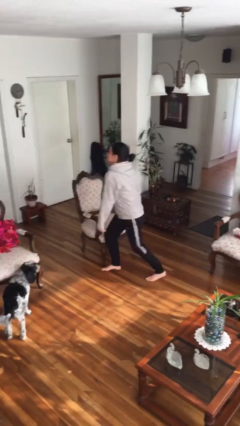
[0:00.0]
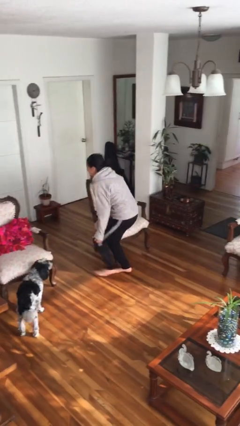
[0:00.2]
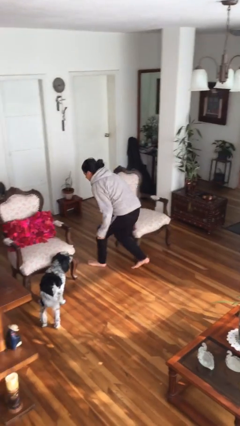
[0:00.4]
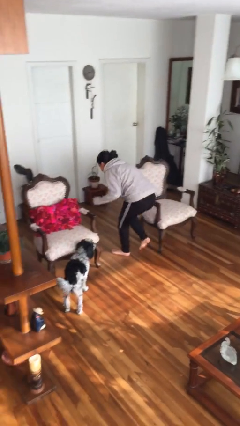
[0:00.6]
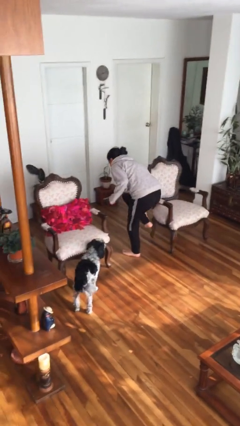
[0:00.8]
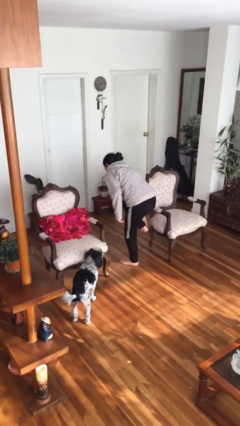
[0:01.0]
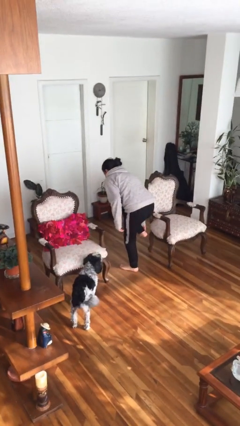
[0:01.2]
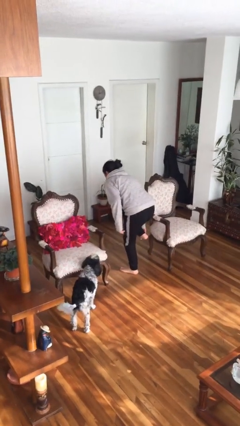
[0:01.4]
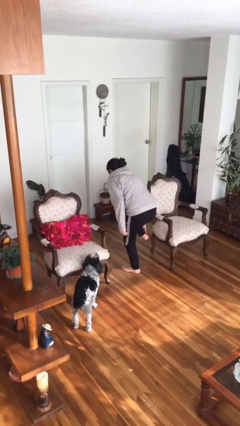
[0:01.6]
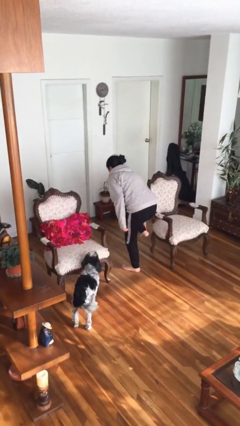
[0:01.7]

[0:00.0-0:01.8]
person stubs toe

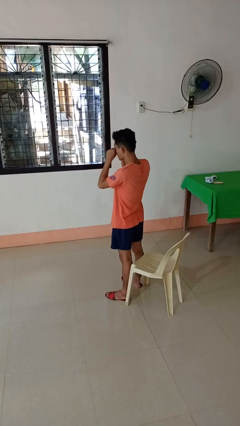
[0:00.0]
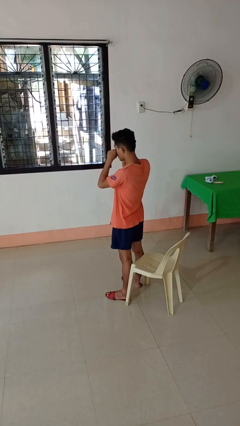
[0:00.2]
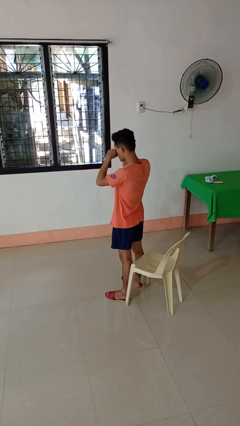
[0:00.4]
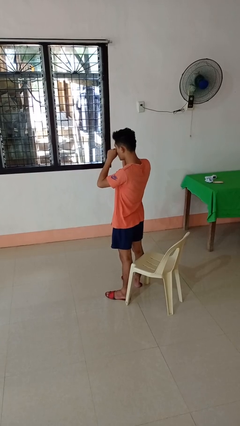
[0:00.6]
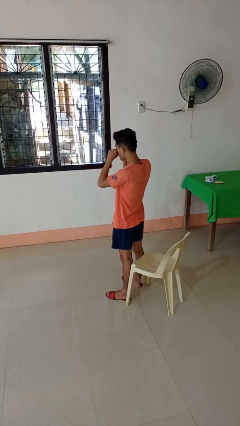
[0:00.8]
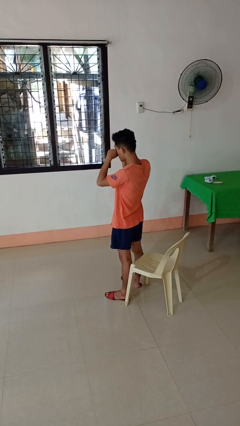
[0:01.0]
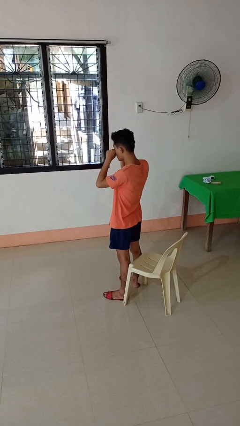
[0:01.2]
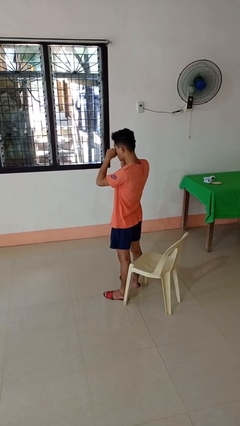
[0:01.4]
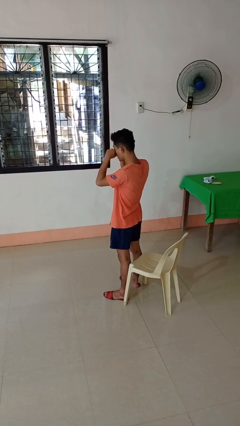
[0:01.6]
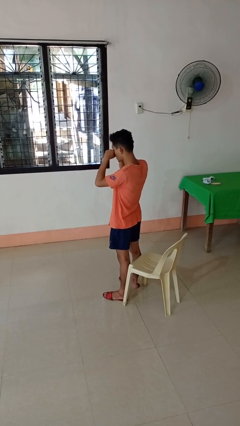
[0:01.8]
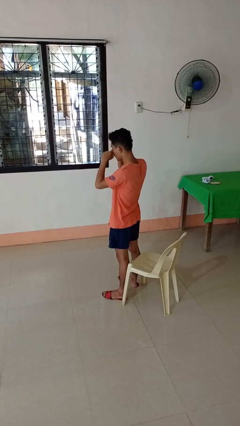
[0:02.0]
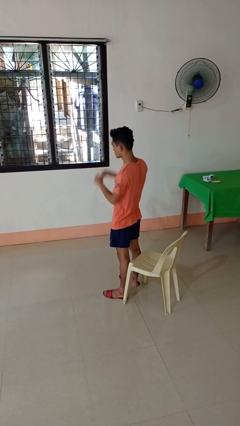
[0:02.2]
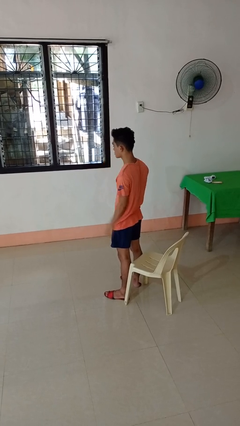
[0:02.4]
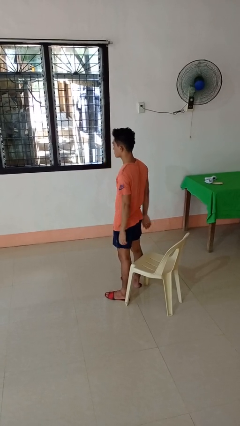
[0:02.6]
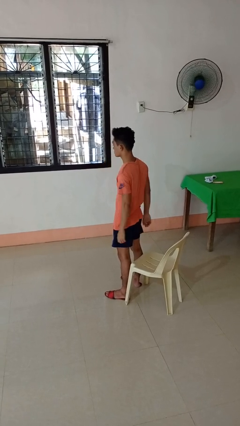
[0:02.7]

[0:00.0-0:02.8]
person rubs eyes

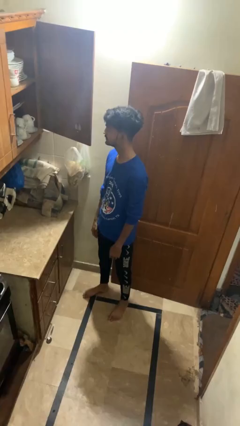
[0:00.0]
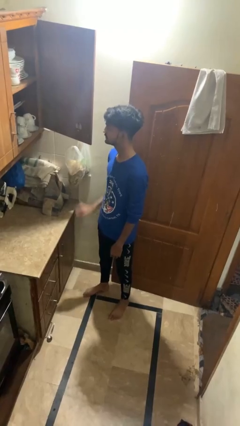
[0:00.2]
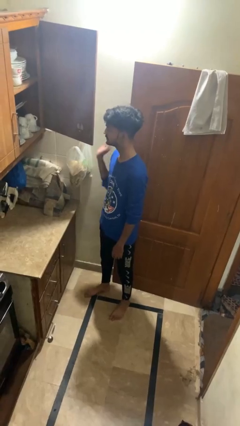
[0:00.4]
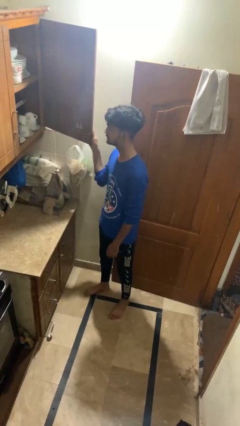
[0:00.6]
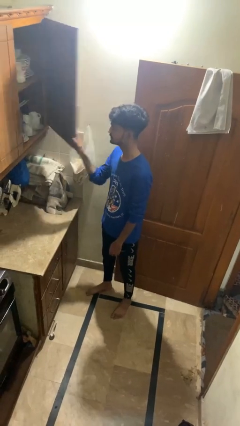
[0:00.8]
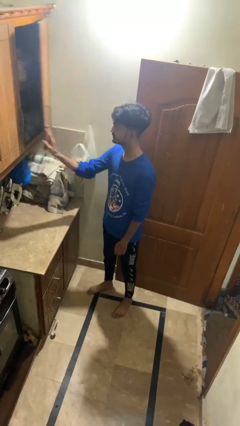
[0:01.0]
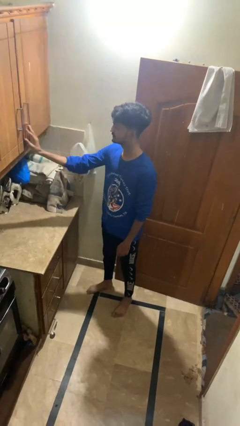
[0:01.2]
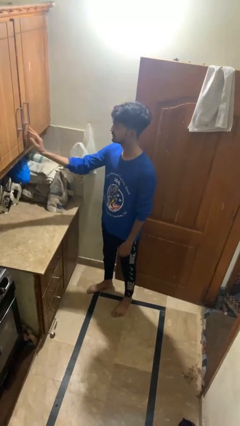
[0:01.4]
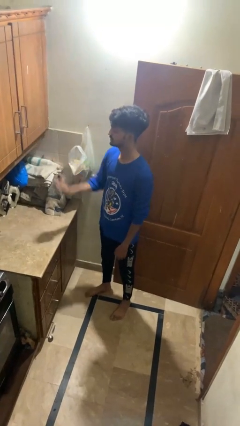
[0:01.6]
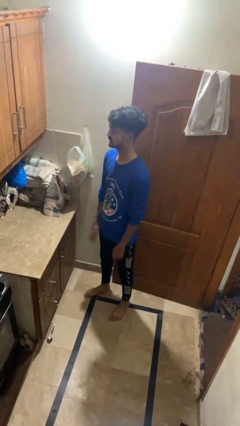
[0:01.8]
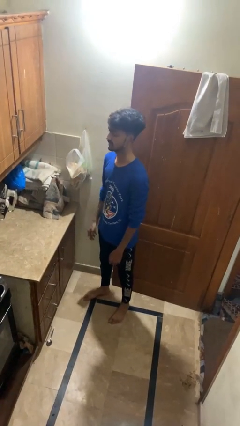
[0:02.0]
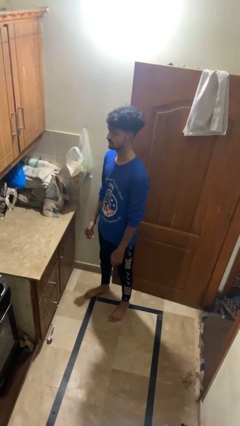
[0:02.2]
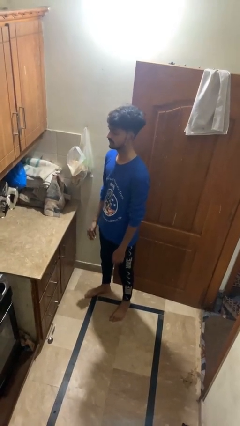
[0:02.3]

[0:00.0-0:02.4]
person closes cabinet

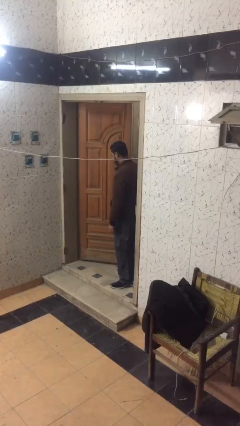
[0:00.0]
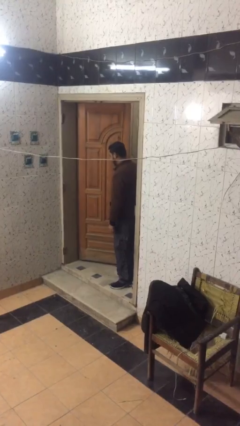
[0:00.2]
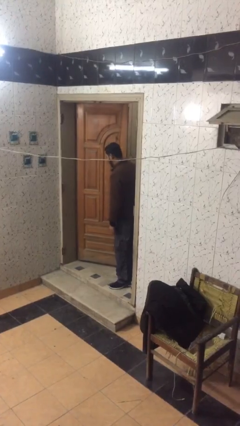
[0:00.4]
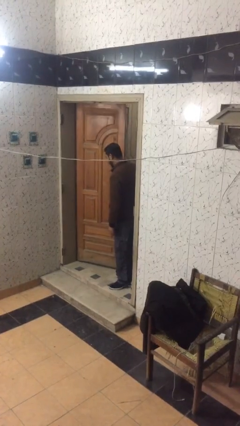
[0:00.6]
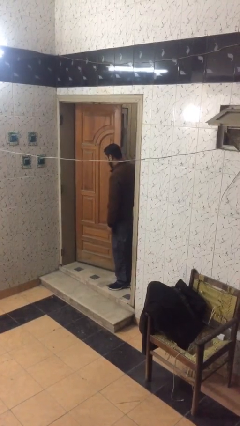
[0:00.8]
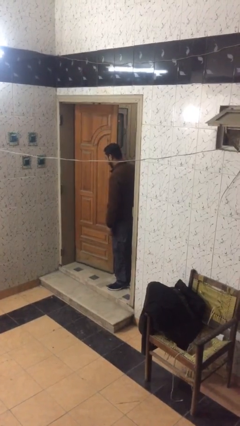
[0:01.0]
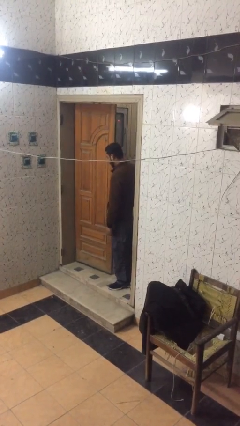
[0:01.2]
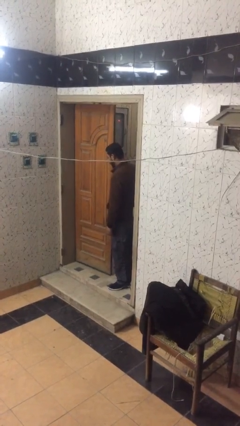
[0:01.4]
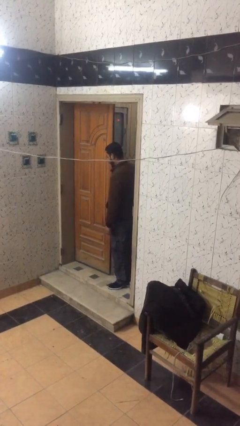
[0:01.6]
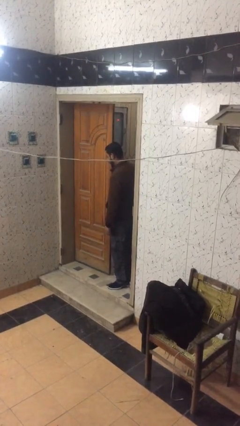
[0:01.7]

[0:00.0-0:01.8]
person closes facility door

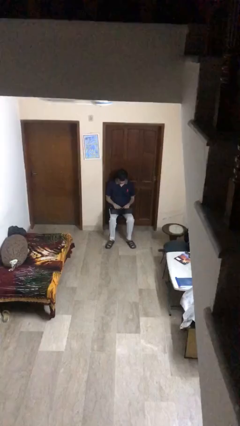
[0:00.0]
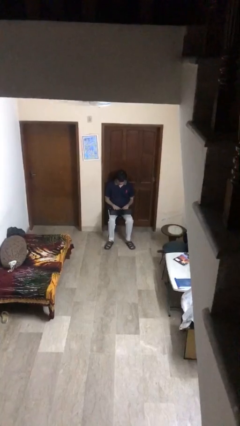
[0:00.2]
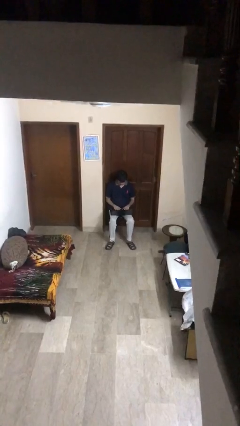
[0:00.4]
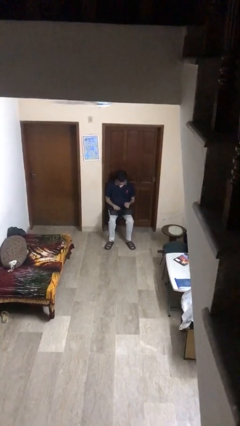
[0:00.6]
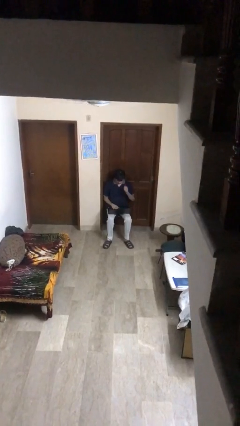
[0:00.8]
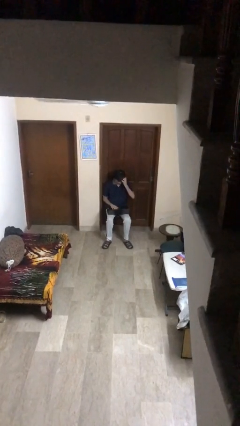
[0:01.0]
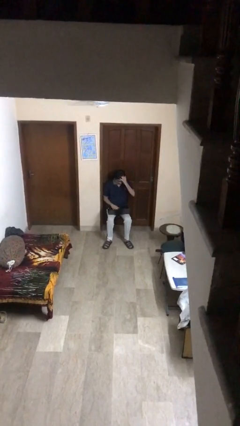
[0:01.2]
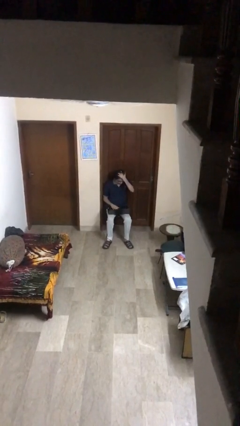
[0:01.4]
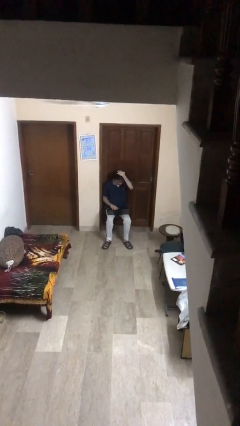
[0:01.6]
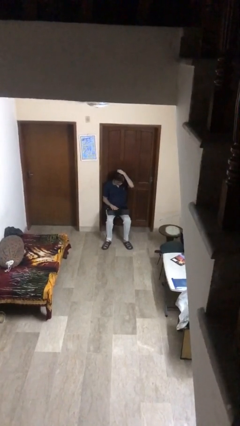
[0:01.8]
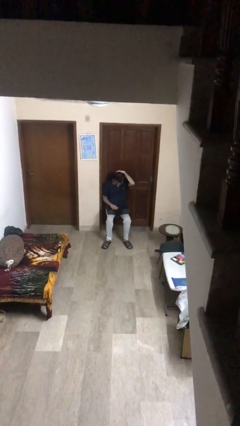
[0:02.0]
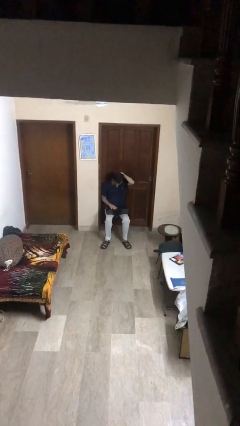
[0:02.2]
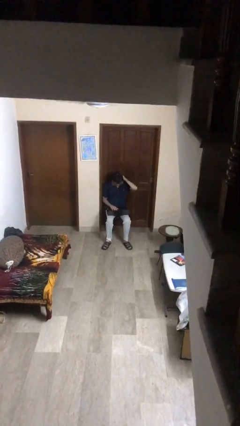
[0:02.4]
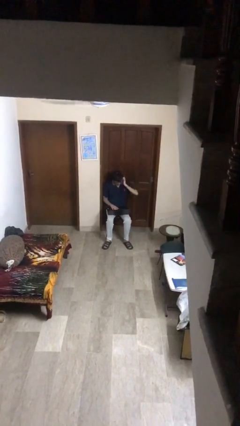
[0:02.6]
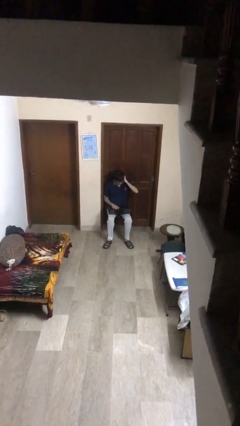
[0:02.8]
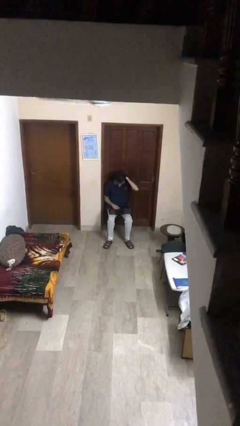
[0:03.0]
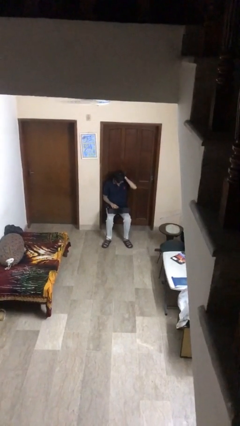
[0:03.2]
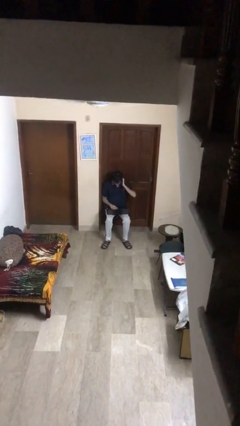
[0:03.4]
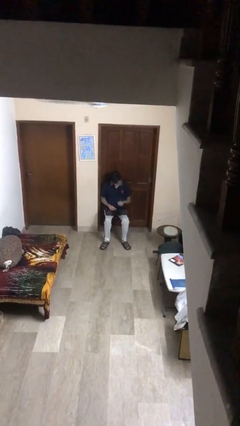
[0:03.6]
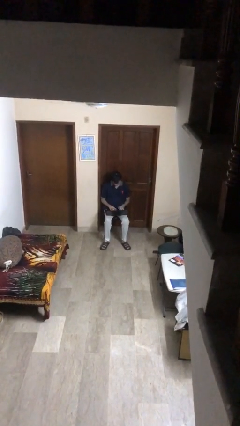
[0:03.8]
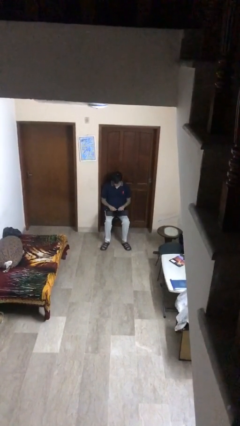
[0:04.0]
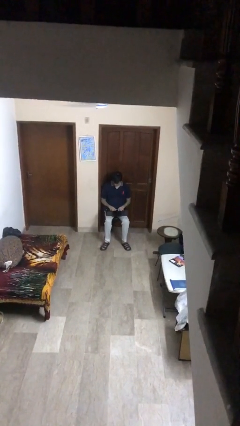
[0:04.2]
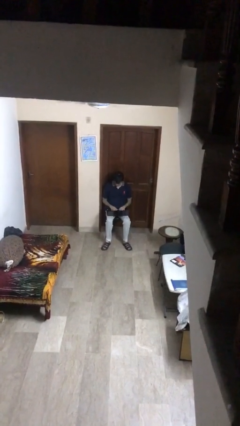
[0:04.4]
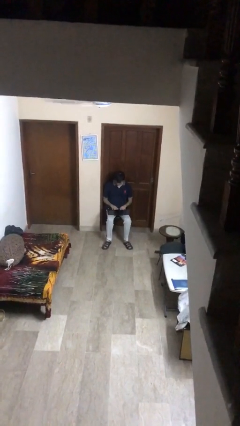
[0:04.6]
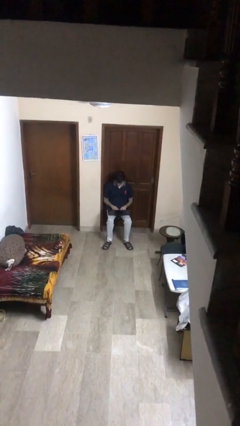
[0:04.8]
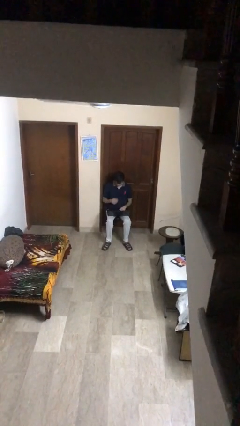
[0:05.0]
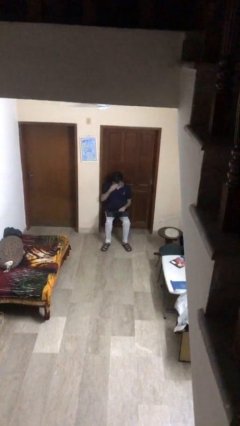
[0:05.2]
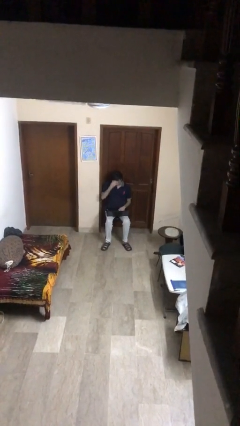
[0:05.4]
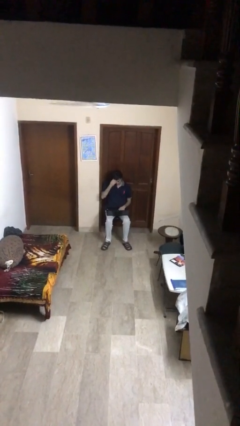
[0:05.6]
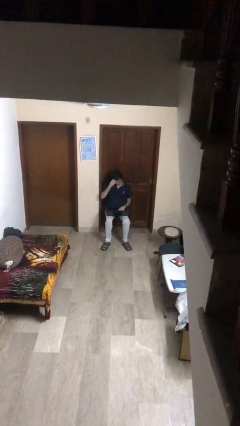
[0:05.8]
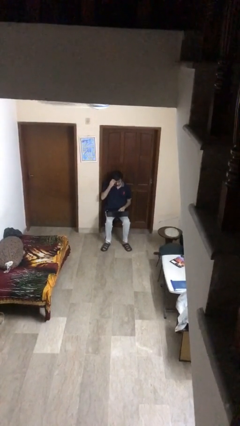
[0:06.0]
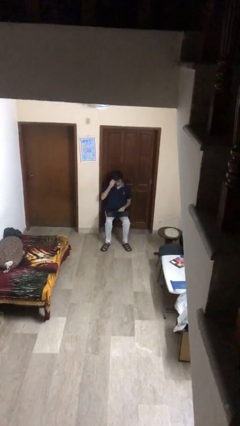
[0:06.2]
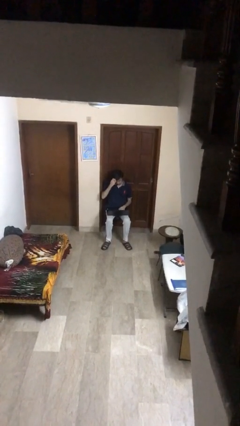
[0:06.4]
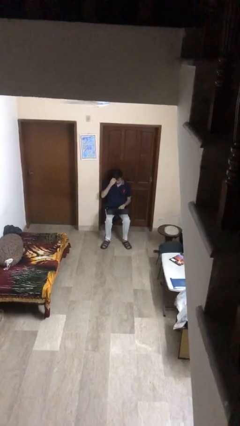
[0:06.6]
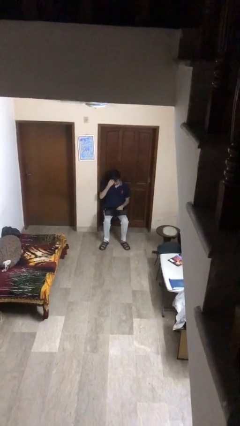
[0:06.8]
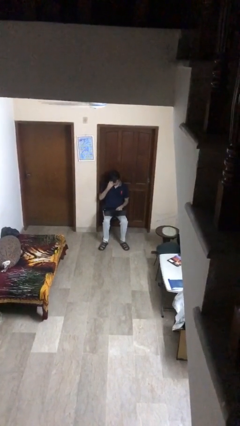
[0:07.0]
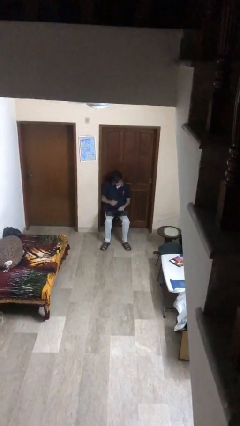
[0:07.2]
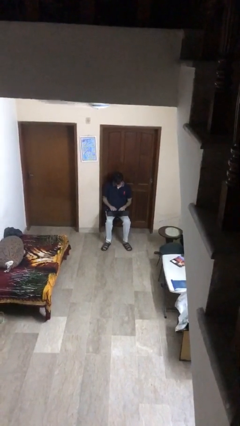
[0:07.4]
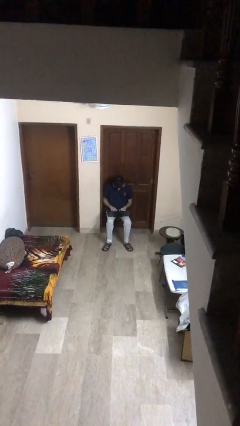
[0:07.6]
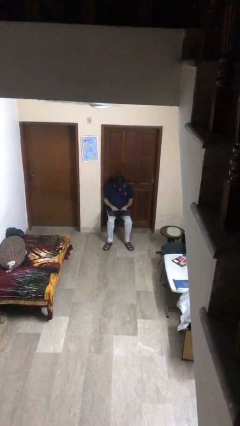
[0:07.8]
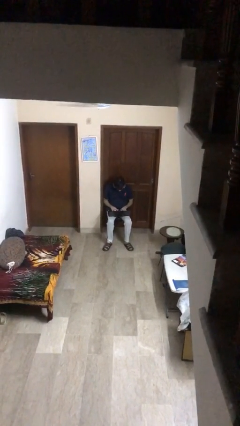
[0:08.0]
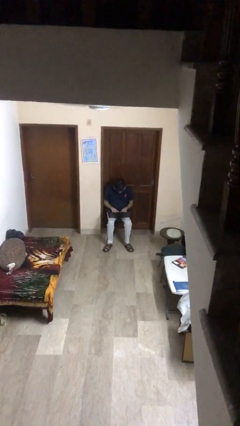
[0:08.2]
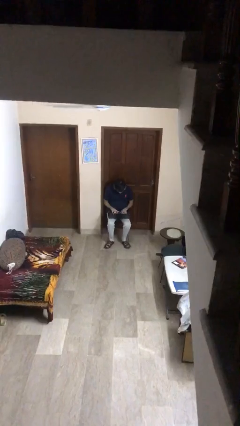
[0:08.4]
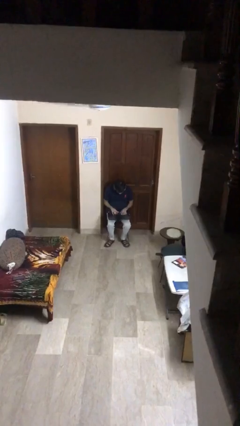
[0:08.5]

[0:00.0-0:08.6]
person interacts with laptop

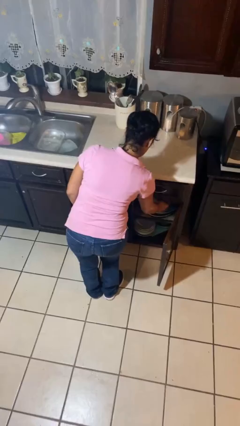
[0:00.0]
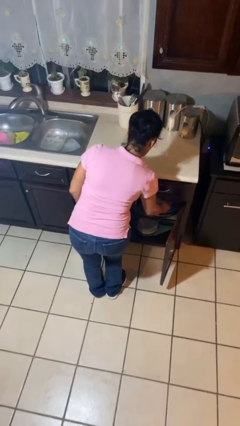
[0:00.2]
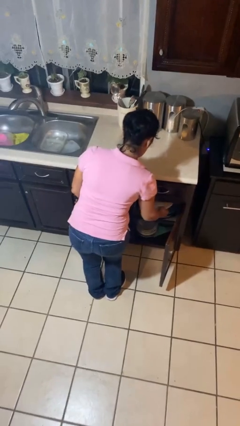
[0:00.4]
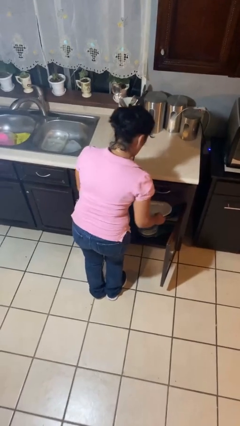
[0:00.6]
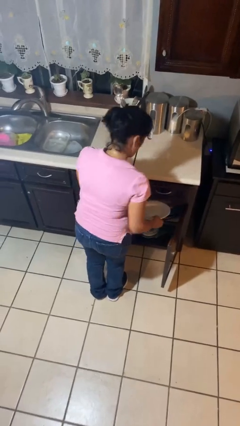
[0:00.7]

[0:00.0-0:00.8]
person puts object in cabinet
